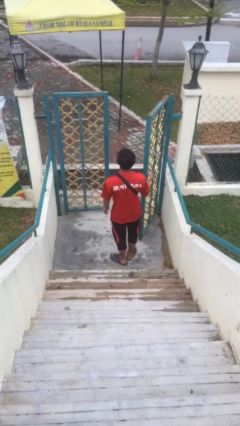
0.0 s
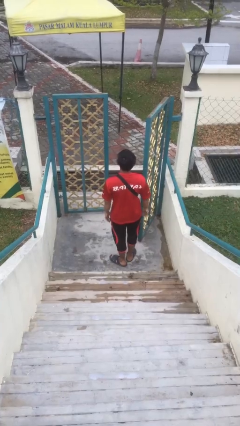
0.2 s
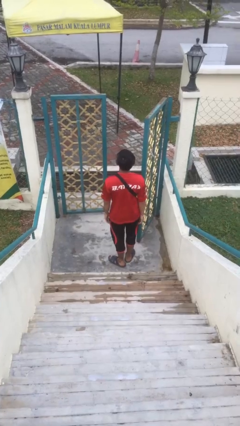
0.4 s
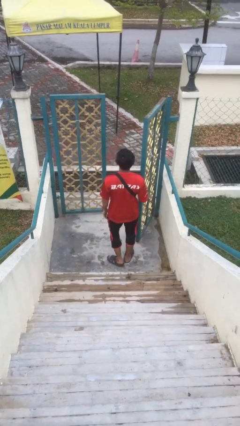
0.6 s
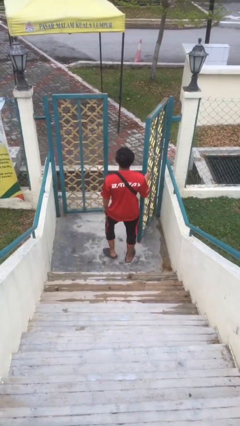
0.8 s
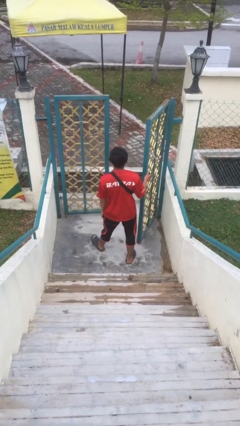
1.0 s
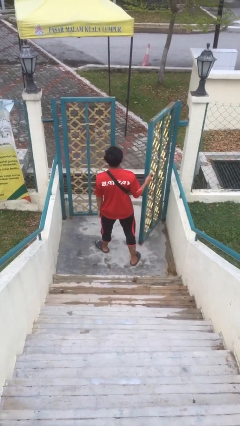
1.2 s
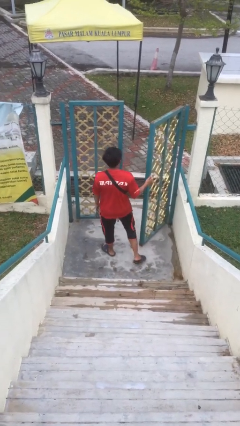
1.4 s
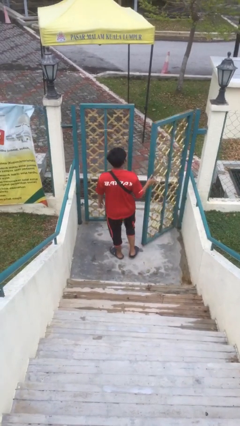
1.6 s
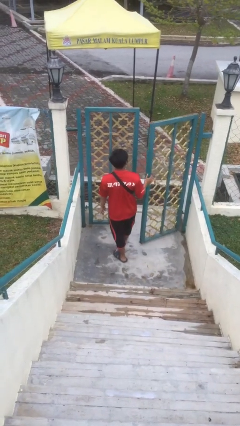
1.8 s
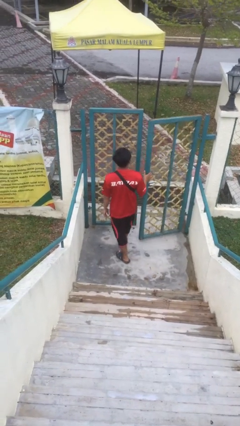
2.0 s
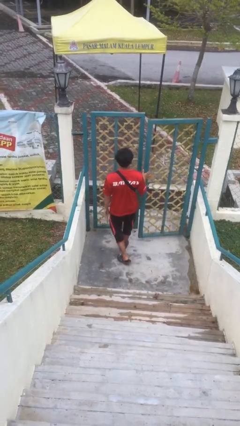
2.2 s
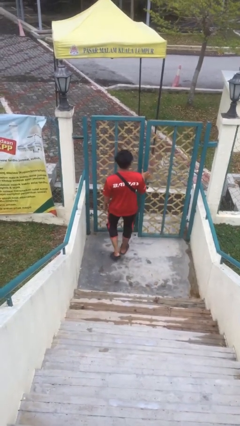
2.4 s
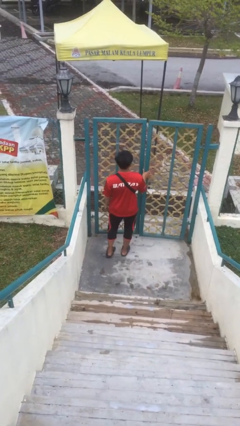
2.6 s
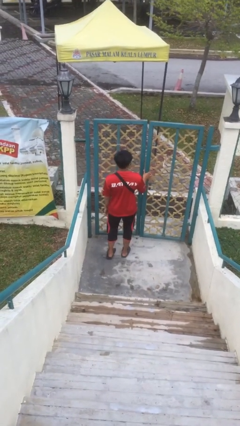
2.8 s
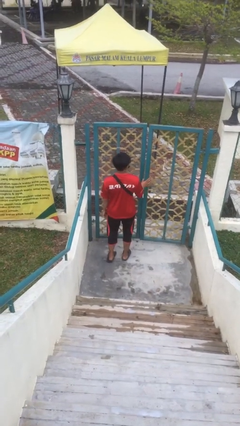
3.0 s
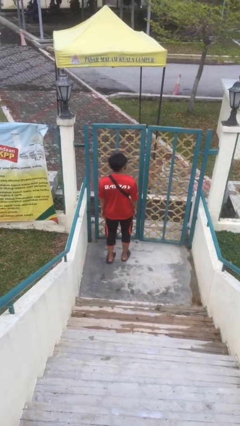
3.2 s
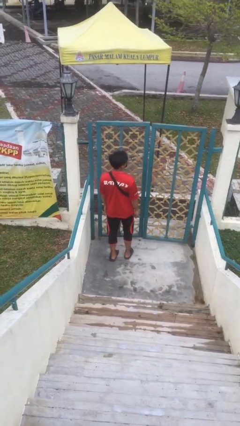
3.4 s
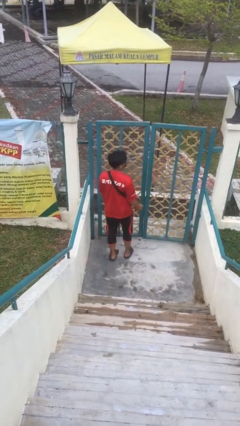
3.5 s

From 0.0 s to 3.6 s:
person closes facility door

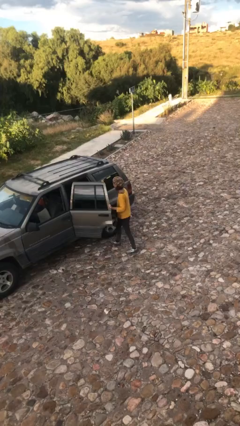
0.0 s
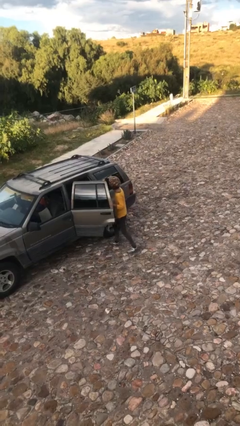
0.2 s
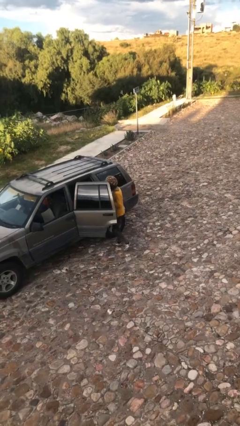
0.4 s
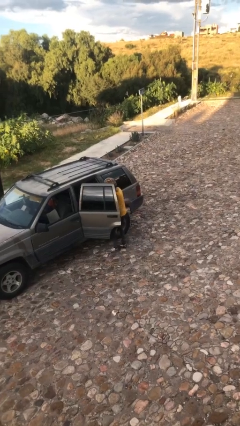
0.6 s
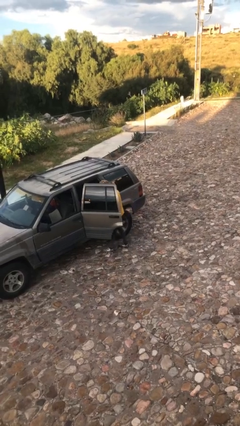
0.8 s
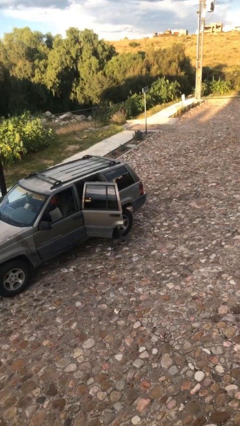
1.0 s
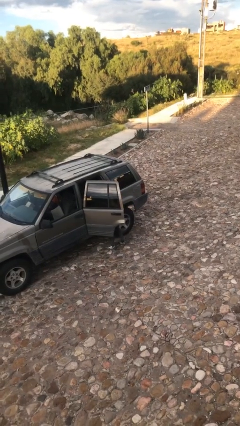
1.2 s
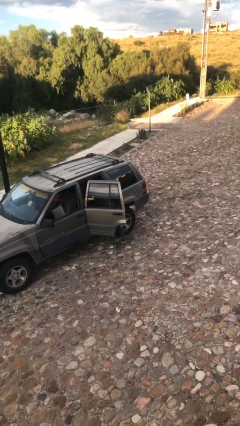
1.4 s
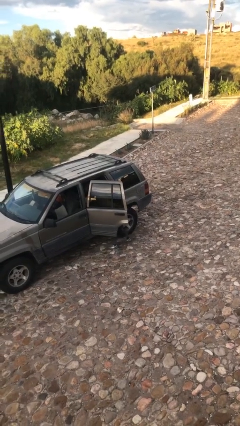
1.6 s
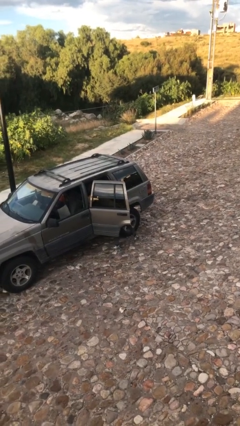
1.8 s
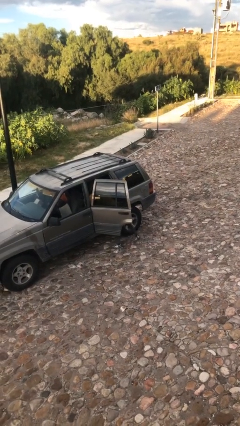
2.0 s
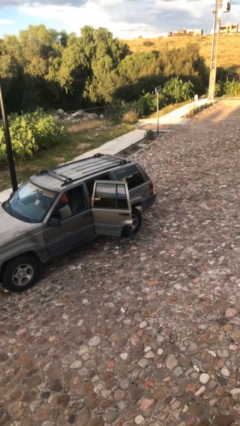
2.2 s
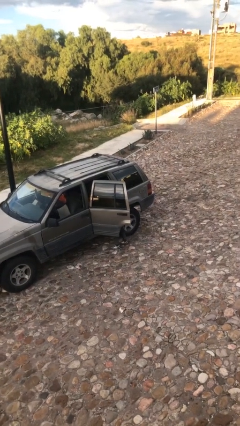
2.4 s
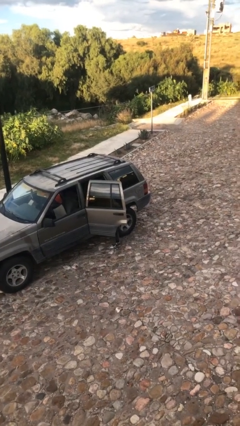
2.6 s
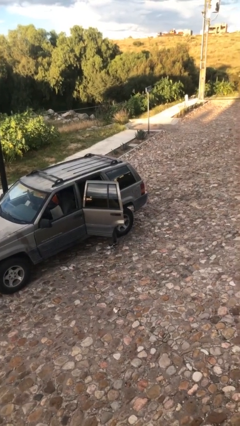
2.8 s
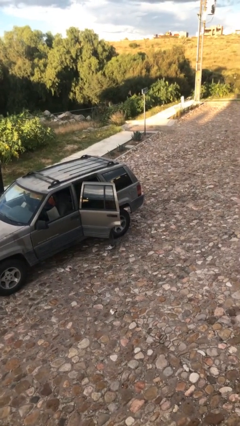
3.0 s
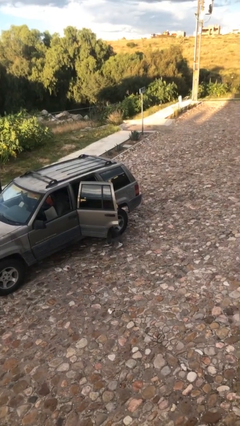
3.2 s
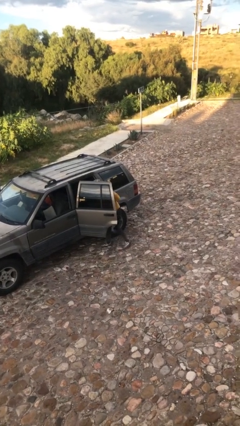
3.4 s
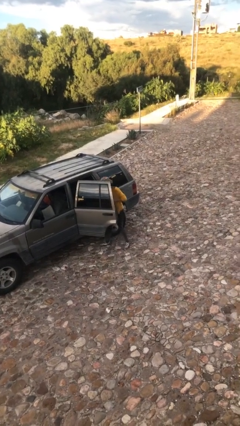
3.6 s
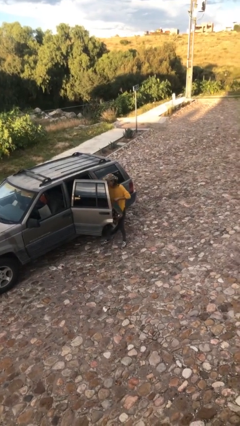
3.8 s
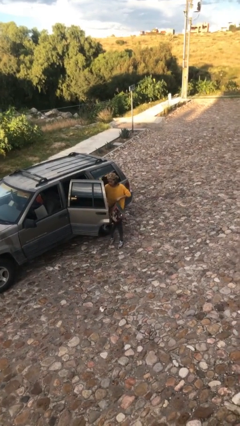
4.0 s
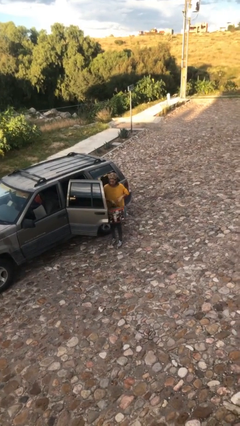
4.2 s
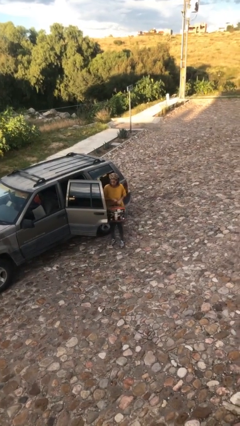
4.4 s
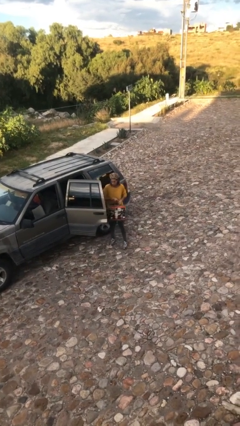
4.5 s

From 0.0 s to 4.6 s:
person unloads car

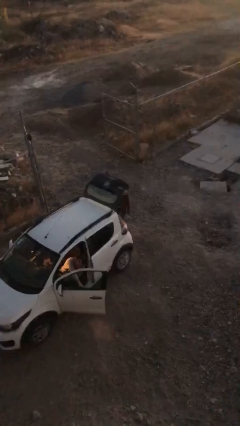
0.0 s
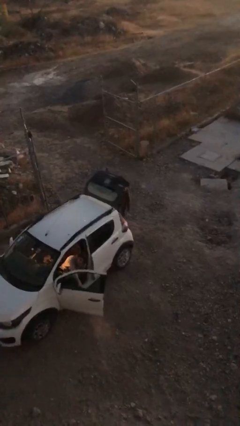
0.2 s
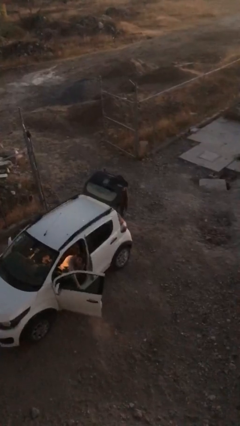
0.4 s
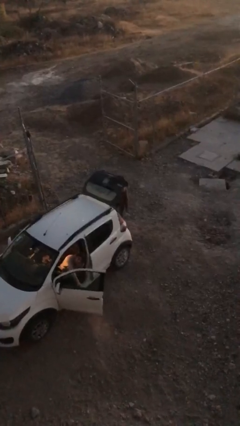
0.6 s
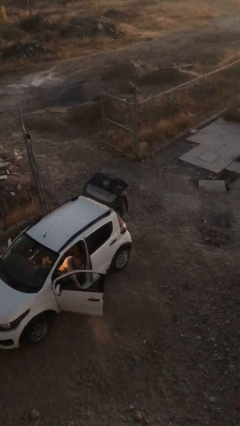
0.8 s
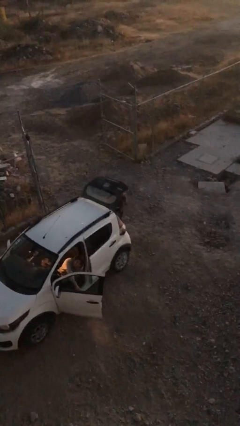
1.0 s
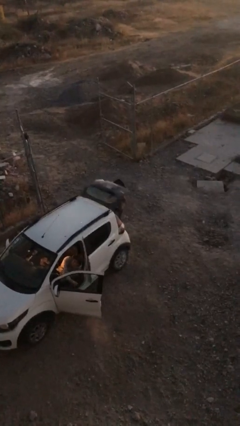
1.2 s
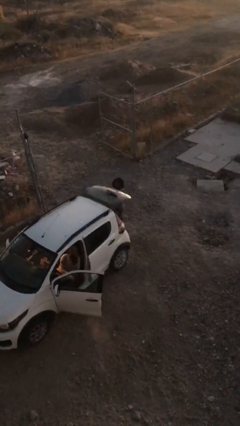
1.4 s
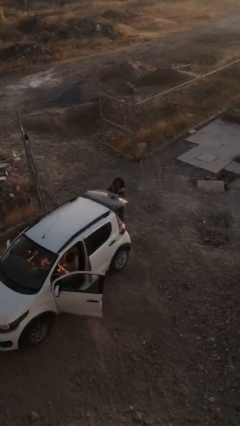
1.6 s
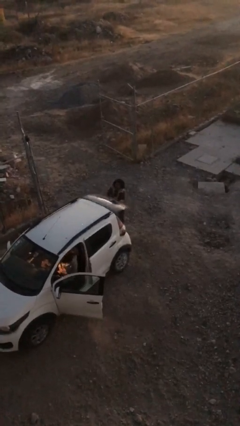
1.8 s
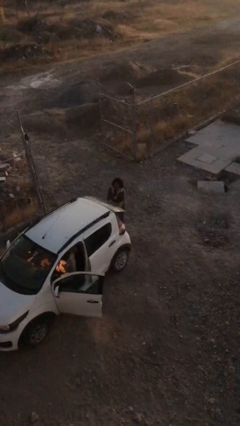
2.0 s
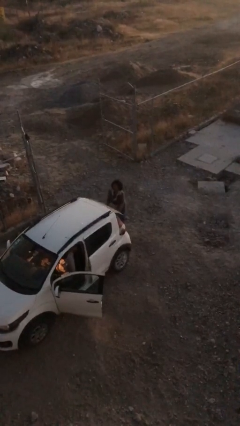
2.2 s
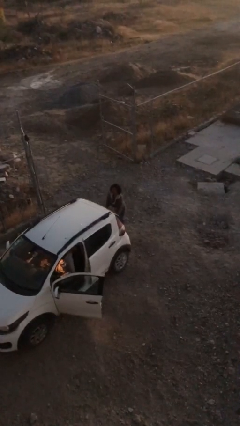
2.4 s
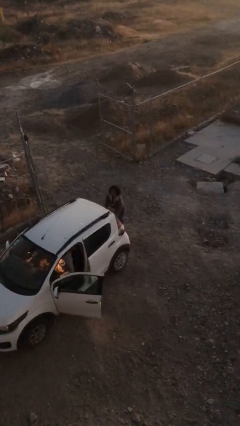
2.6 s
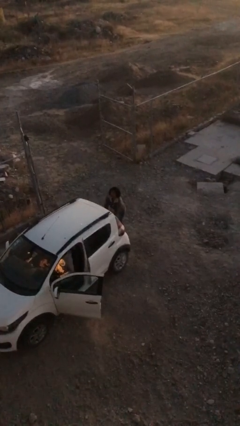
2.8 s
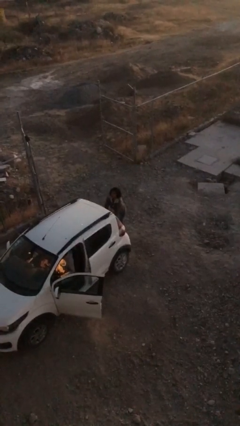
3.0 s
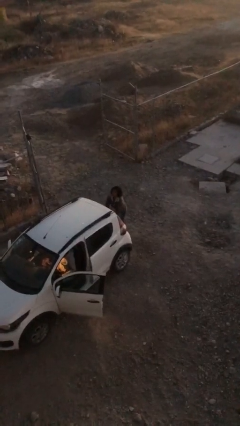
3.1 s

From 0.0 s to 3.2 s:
person closes car trunk

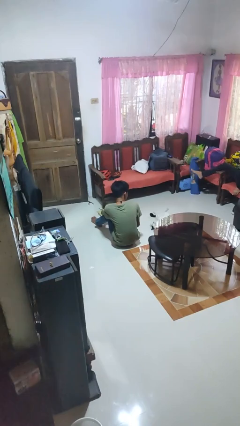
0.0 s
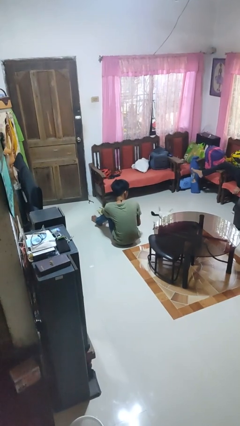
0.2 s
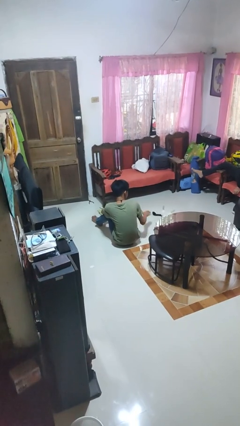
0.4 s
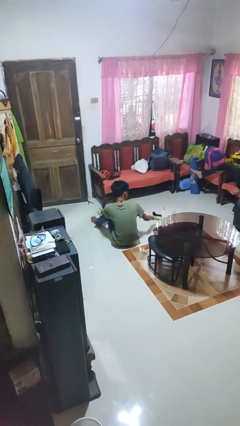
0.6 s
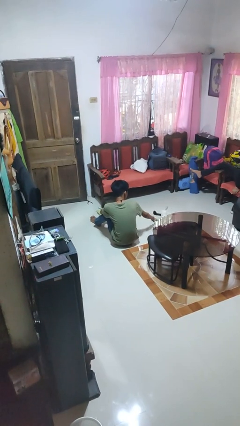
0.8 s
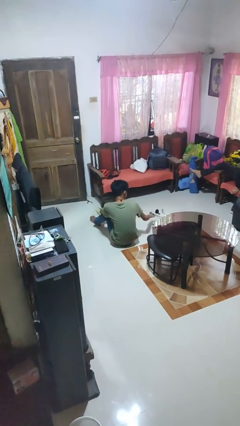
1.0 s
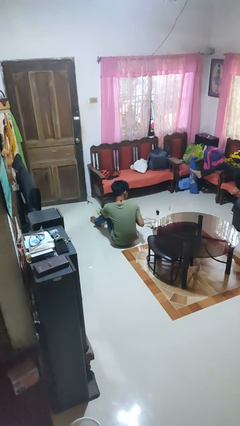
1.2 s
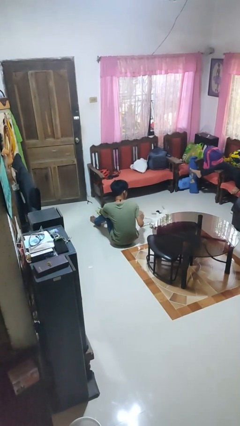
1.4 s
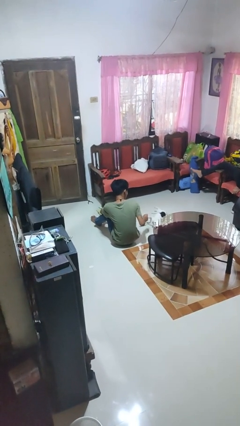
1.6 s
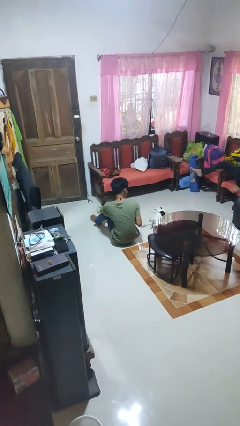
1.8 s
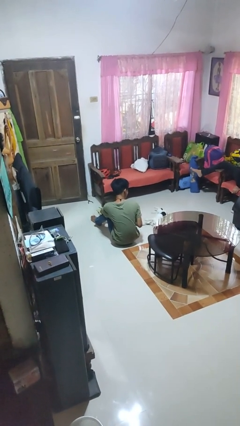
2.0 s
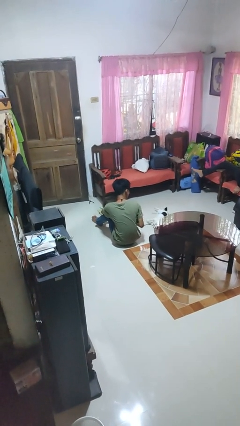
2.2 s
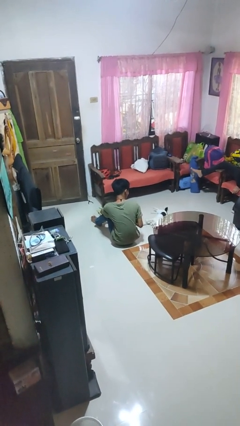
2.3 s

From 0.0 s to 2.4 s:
person pets cat

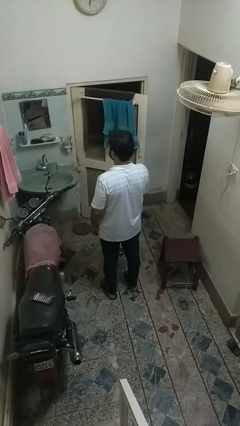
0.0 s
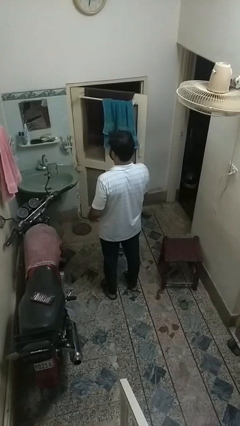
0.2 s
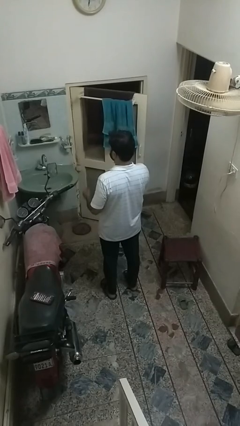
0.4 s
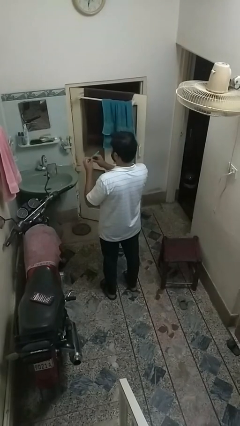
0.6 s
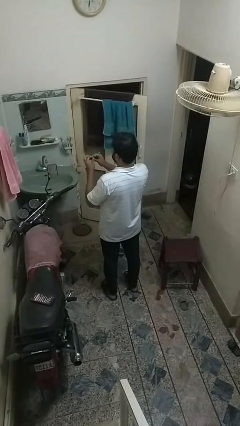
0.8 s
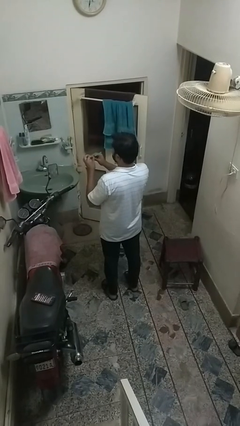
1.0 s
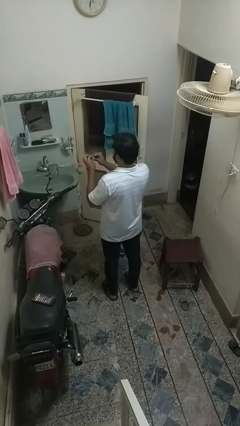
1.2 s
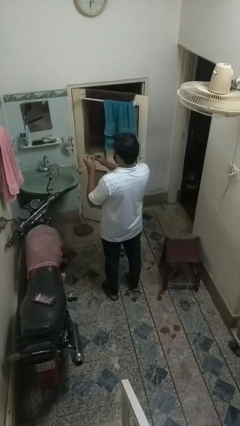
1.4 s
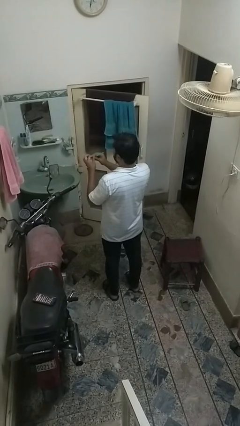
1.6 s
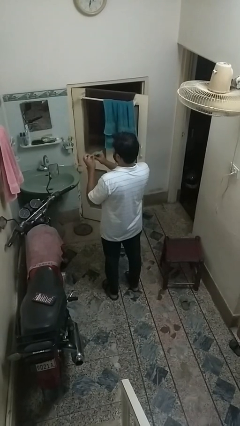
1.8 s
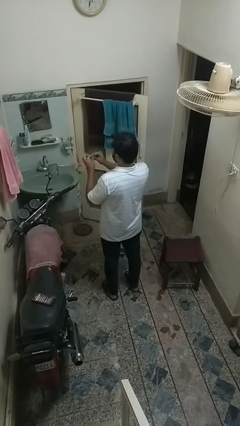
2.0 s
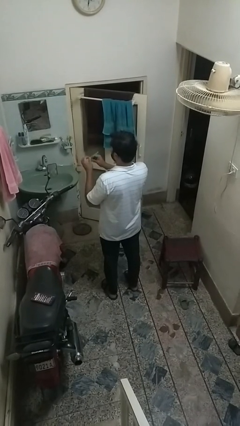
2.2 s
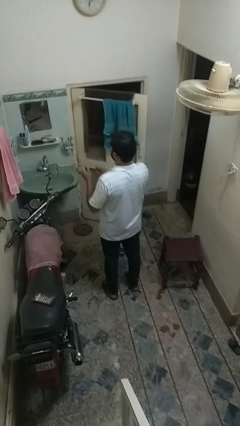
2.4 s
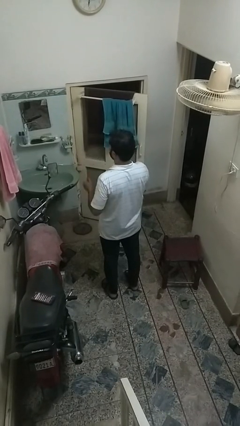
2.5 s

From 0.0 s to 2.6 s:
person files fingernails

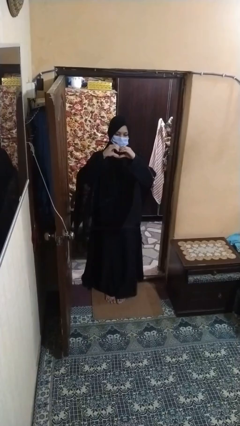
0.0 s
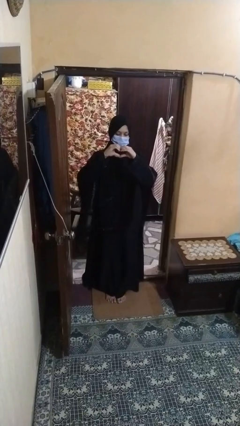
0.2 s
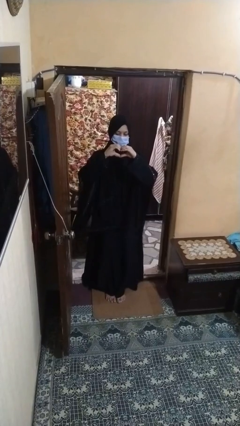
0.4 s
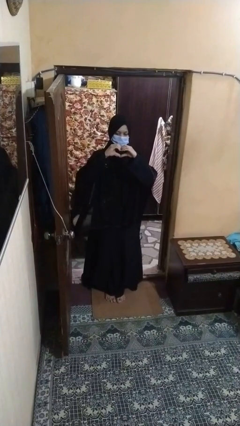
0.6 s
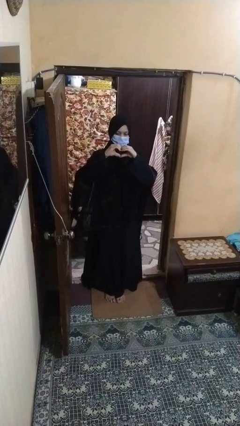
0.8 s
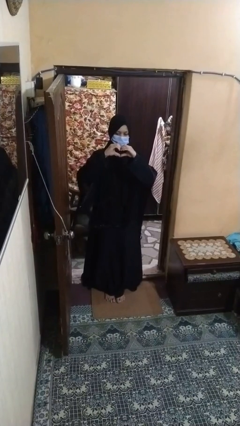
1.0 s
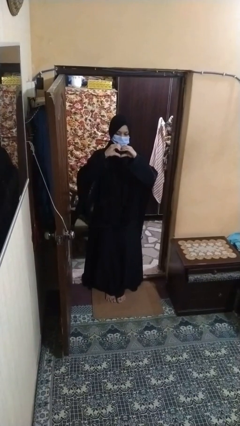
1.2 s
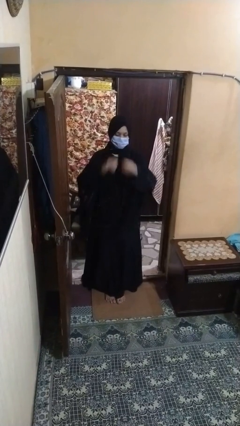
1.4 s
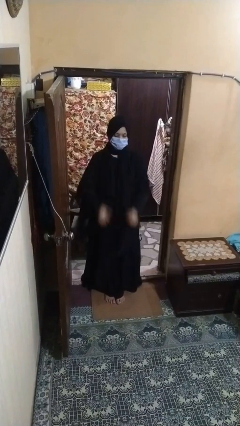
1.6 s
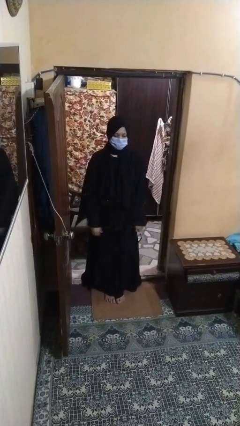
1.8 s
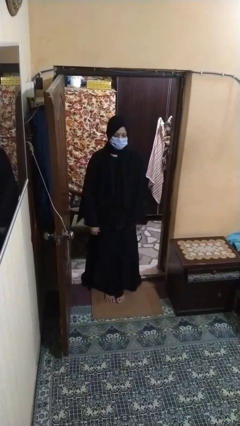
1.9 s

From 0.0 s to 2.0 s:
person gestures heart
